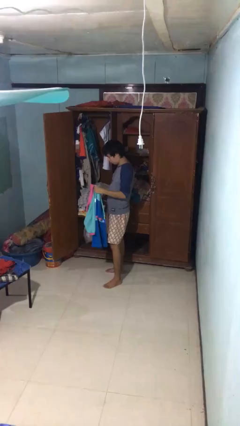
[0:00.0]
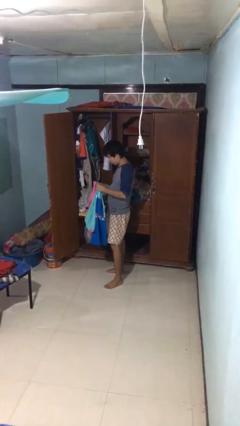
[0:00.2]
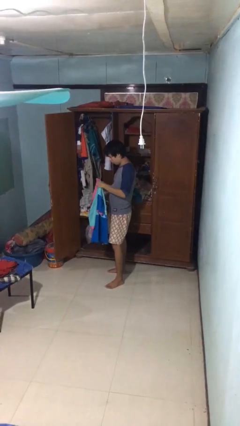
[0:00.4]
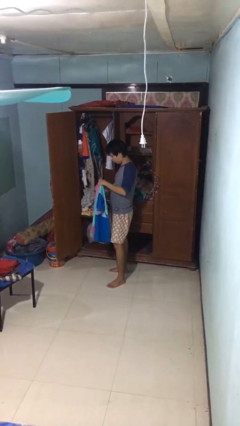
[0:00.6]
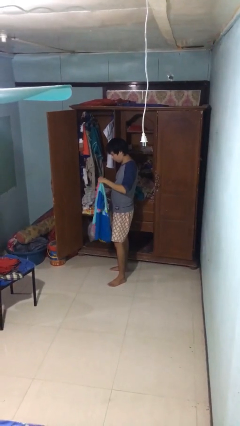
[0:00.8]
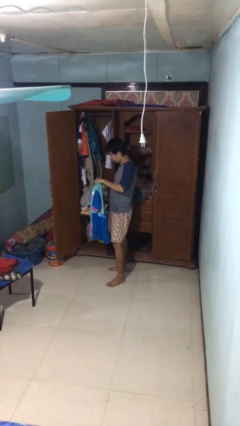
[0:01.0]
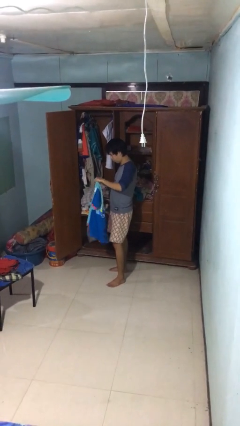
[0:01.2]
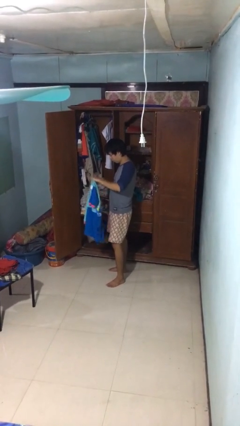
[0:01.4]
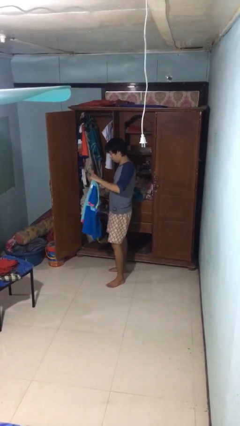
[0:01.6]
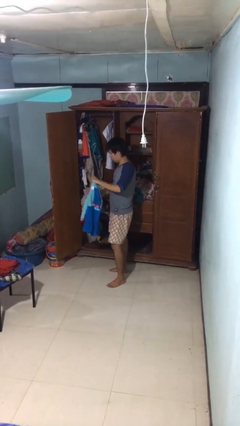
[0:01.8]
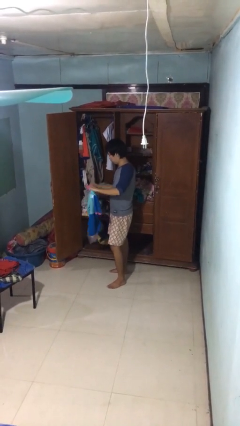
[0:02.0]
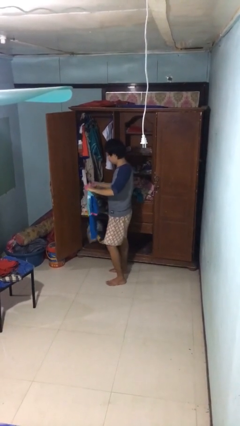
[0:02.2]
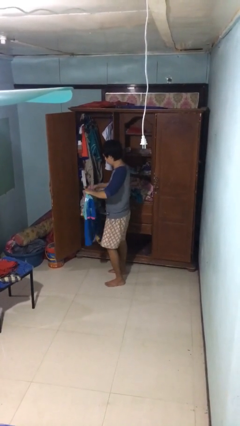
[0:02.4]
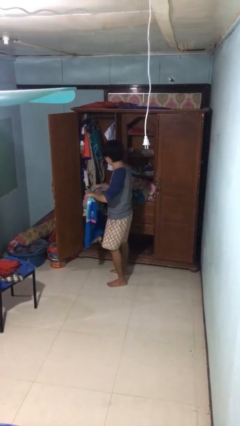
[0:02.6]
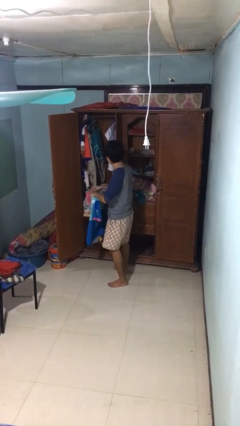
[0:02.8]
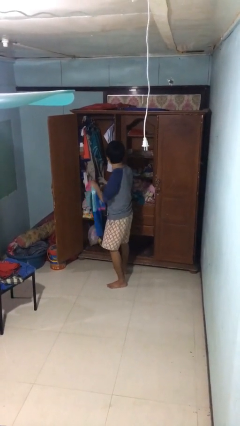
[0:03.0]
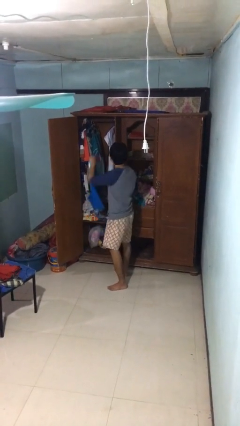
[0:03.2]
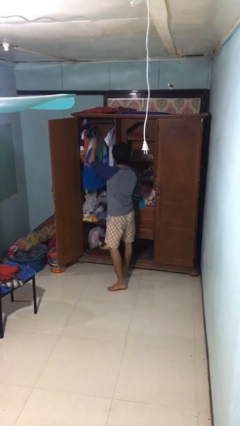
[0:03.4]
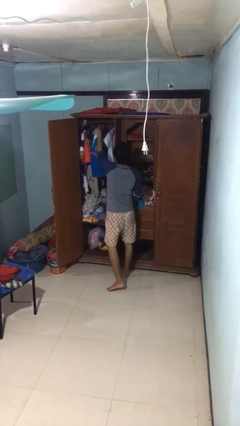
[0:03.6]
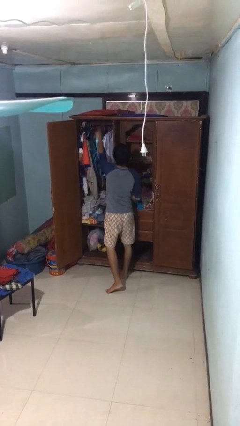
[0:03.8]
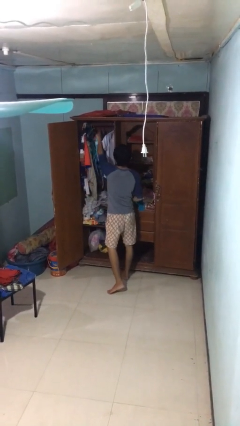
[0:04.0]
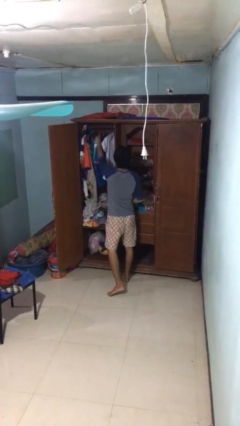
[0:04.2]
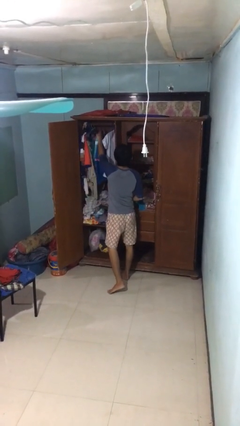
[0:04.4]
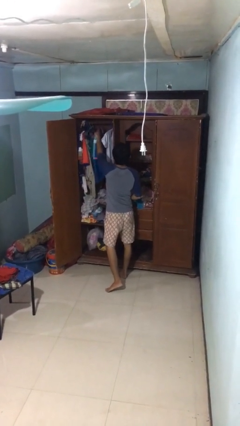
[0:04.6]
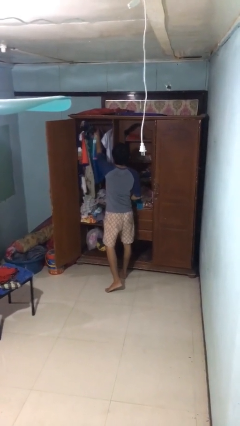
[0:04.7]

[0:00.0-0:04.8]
person puts clothes into closet

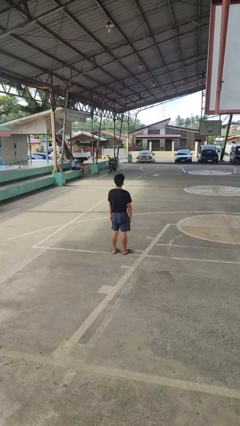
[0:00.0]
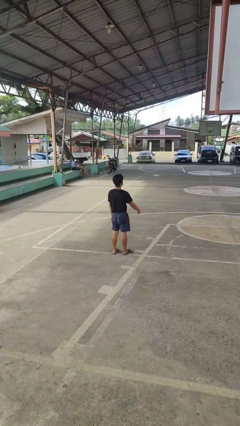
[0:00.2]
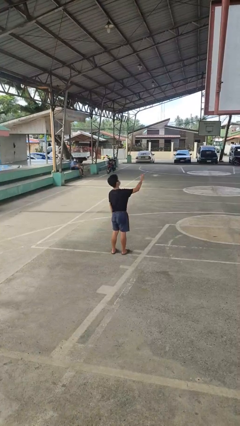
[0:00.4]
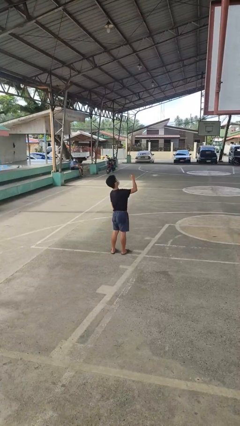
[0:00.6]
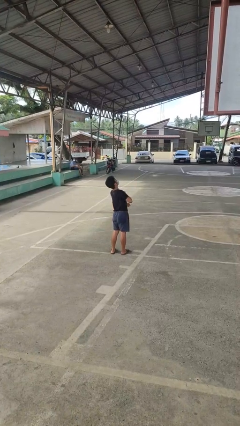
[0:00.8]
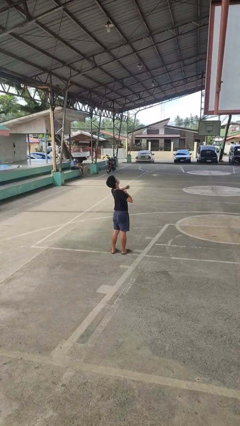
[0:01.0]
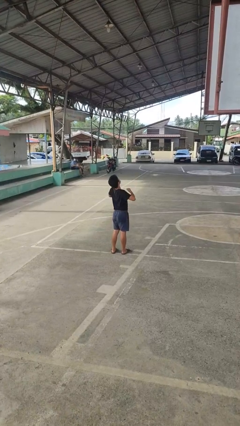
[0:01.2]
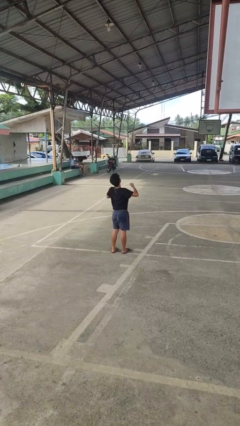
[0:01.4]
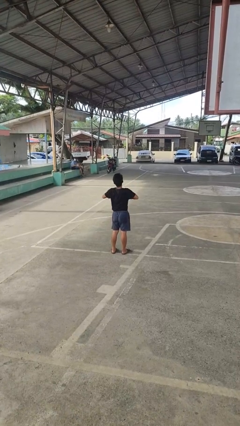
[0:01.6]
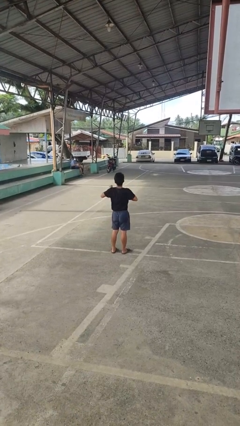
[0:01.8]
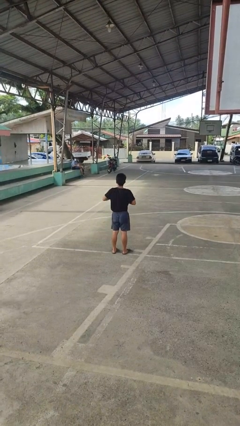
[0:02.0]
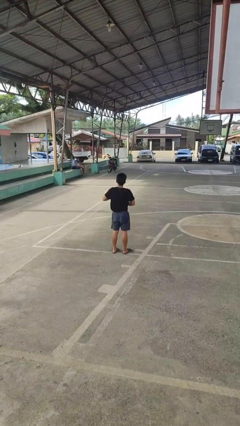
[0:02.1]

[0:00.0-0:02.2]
person drums on chest

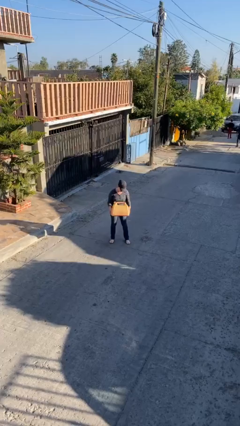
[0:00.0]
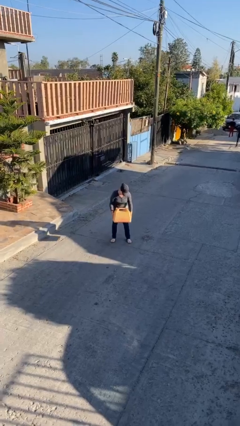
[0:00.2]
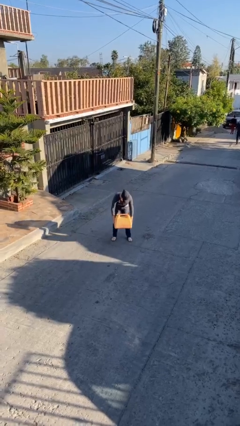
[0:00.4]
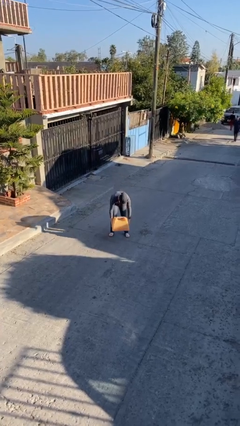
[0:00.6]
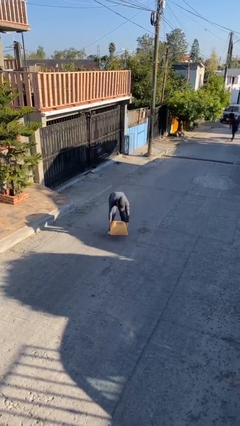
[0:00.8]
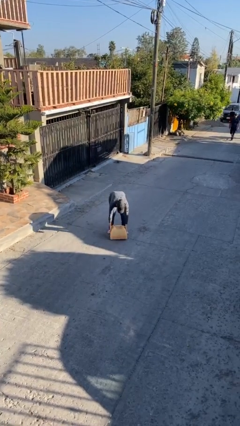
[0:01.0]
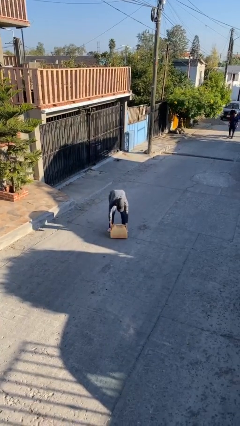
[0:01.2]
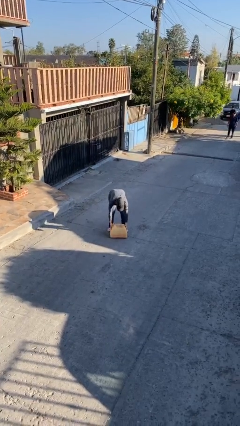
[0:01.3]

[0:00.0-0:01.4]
person puts down object on floor

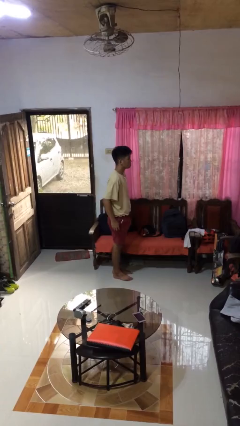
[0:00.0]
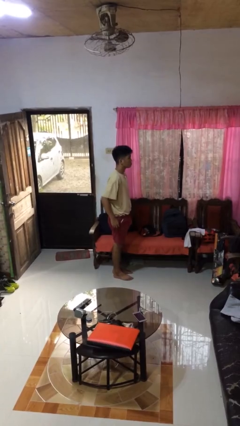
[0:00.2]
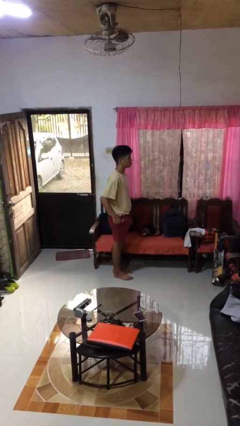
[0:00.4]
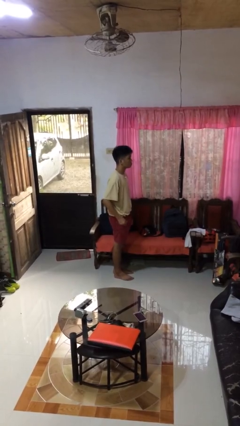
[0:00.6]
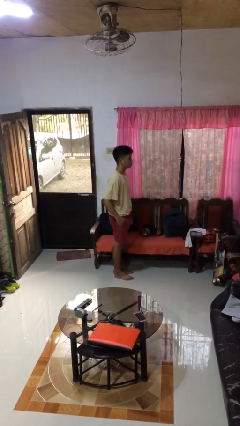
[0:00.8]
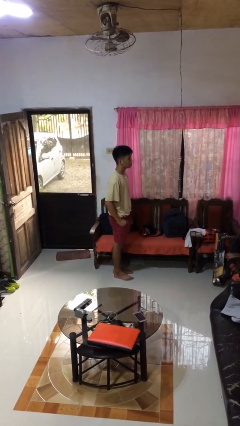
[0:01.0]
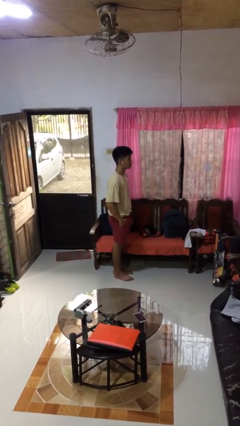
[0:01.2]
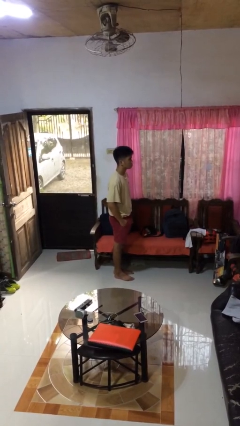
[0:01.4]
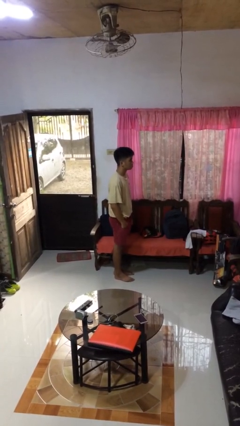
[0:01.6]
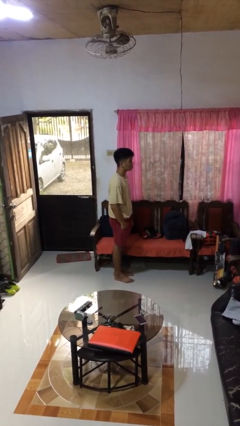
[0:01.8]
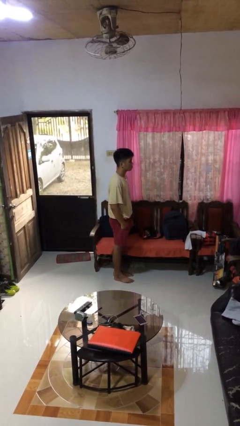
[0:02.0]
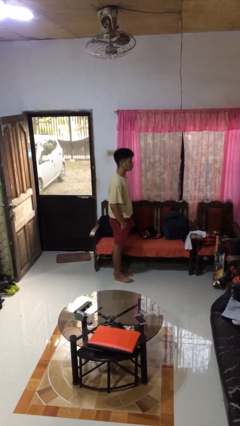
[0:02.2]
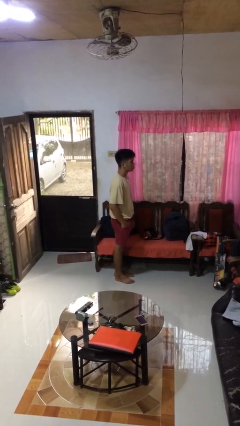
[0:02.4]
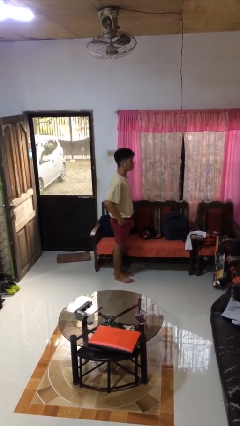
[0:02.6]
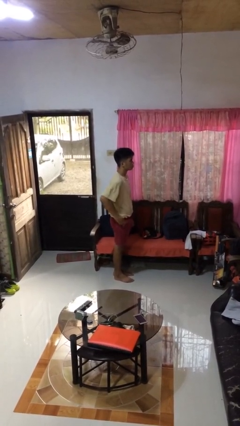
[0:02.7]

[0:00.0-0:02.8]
person puts hands in back pockets

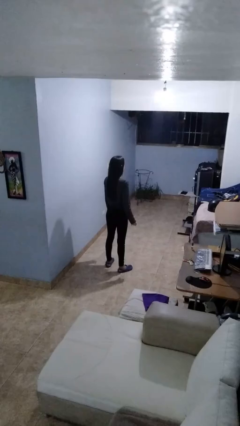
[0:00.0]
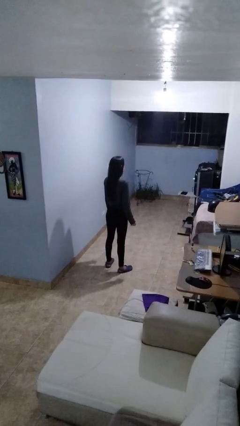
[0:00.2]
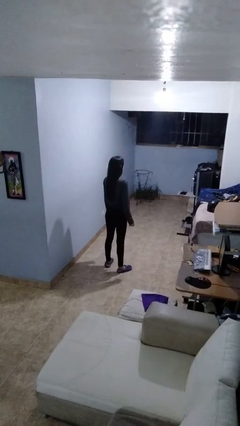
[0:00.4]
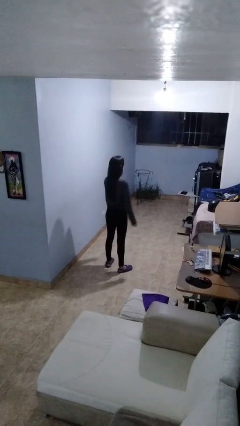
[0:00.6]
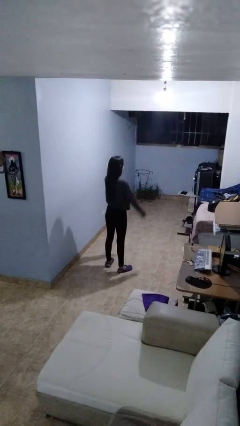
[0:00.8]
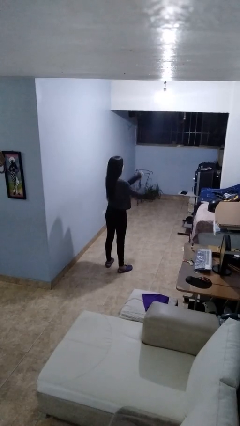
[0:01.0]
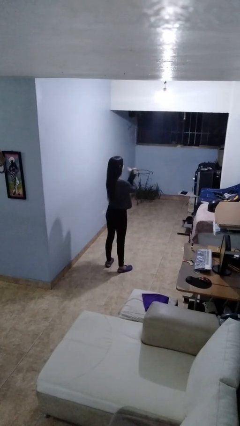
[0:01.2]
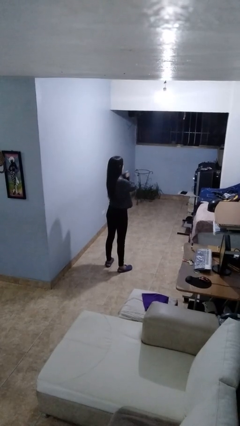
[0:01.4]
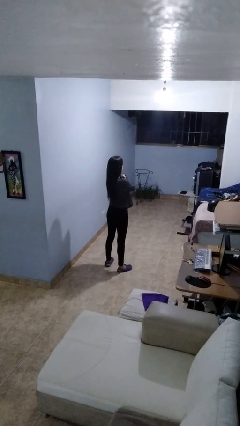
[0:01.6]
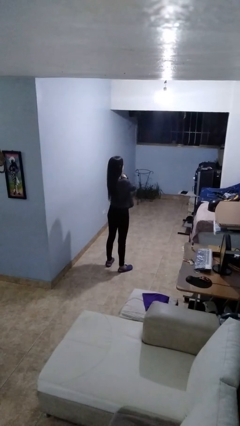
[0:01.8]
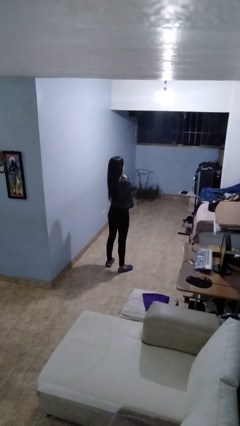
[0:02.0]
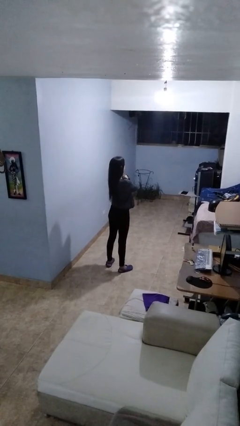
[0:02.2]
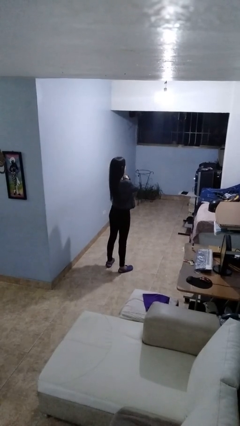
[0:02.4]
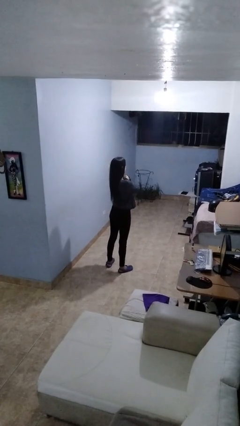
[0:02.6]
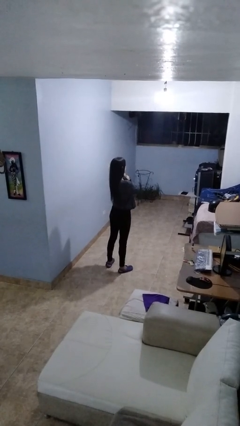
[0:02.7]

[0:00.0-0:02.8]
person gestures arms x

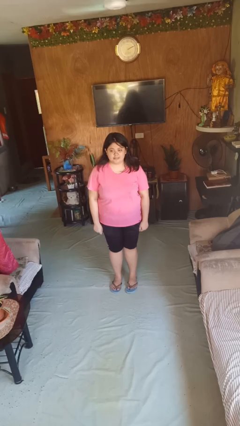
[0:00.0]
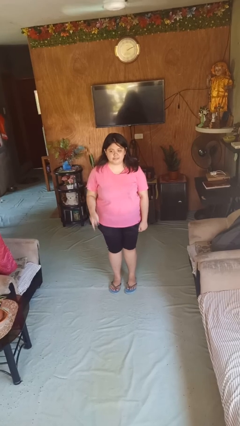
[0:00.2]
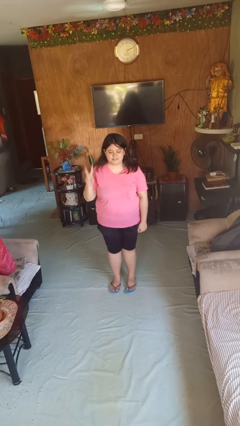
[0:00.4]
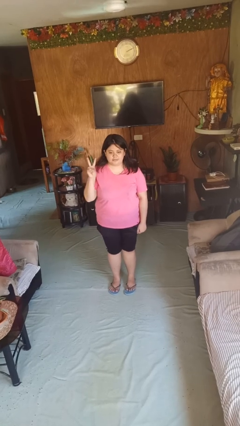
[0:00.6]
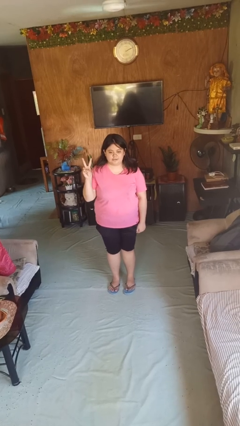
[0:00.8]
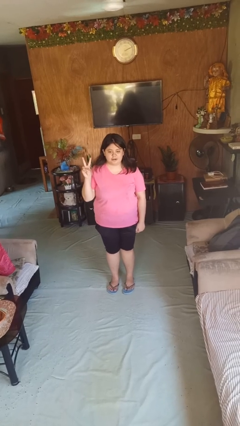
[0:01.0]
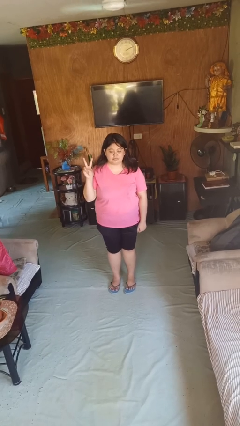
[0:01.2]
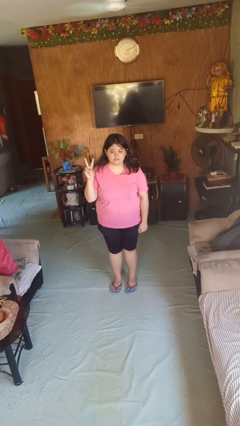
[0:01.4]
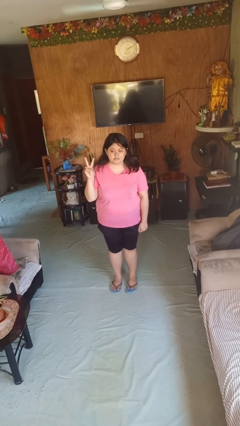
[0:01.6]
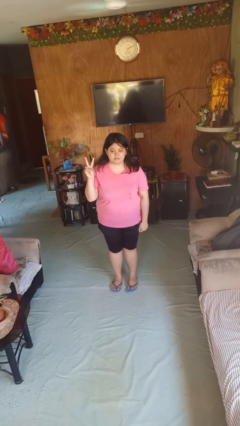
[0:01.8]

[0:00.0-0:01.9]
person gestures peace

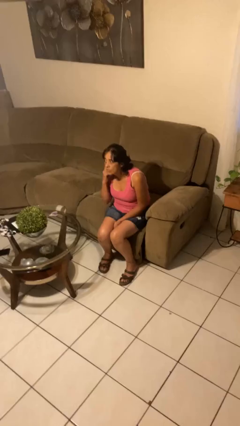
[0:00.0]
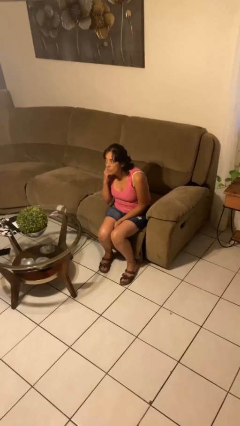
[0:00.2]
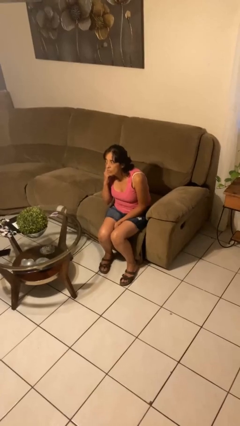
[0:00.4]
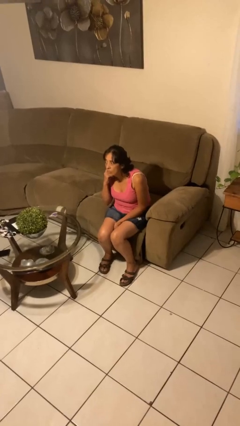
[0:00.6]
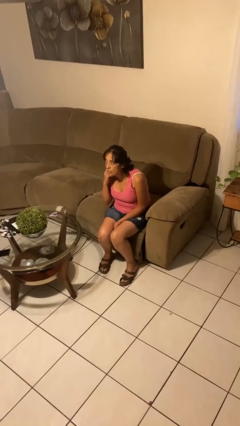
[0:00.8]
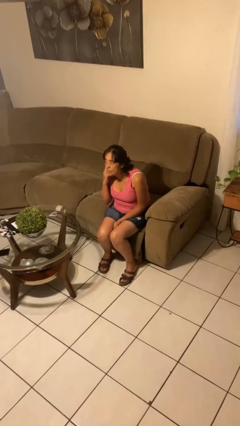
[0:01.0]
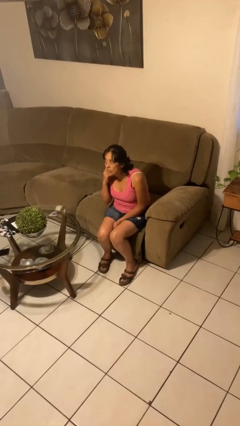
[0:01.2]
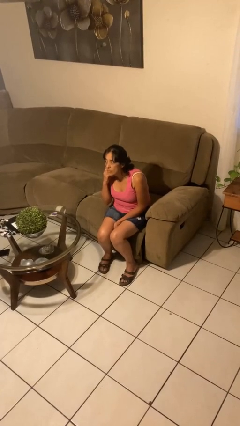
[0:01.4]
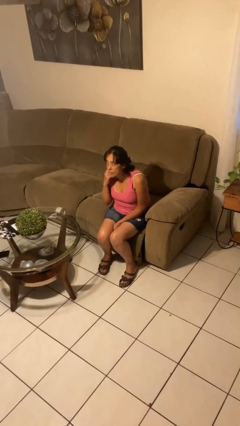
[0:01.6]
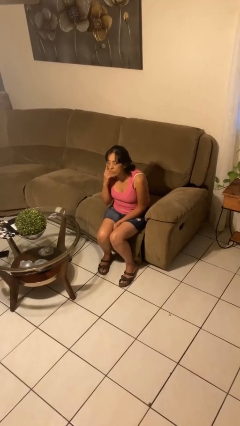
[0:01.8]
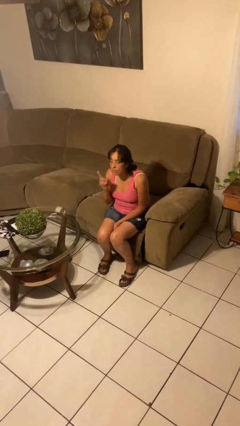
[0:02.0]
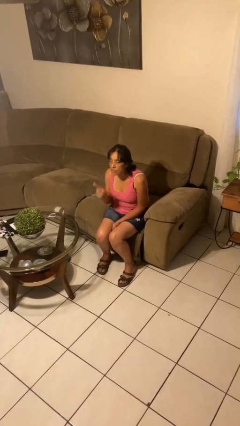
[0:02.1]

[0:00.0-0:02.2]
person gestures listen closely
